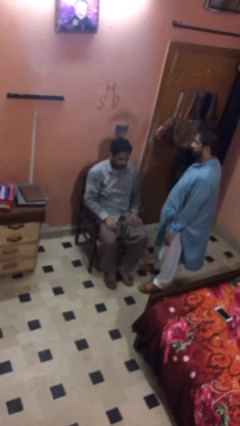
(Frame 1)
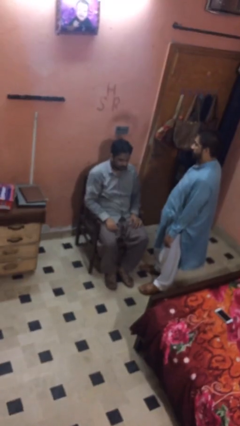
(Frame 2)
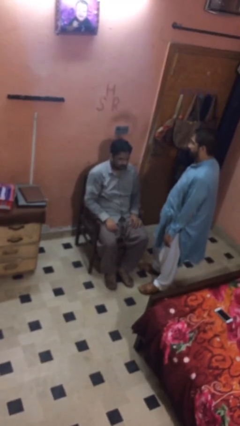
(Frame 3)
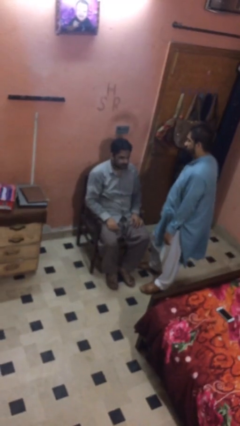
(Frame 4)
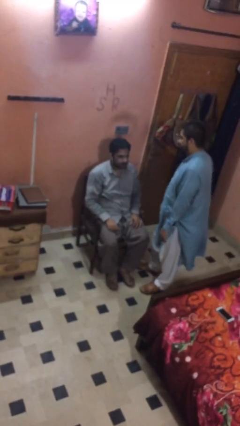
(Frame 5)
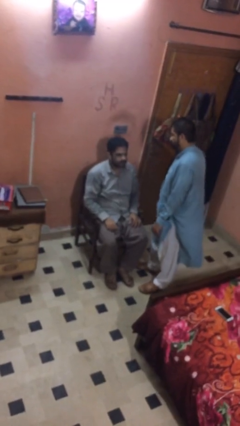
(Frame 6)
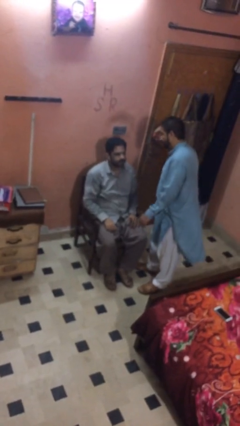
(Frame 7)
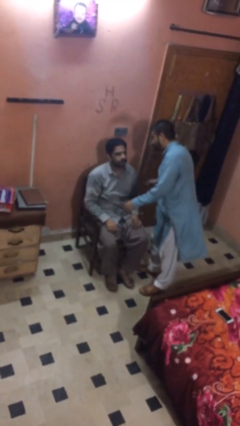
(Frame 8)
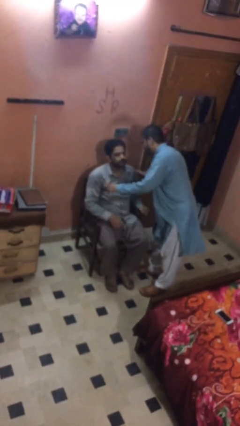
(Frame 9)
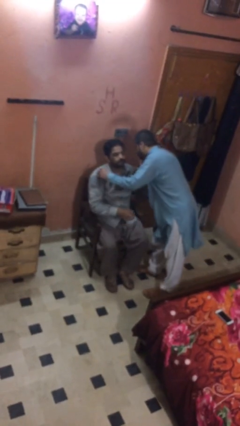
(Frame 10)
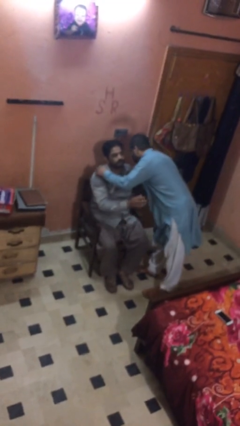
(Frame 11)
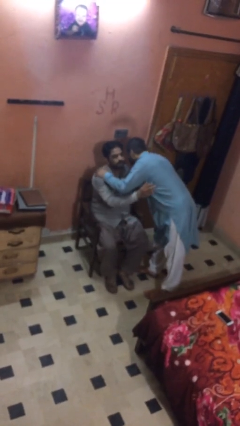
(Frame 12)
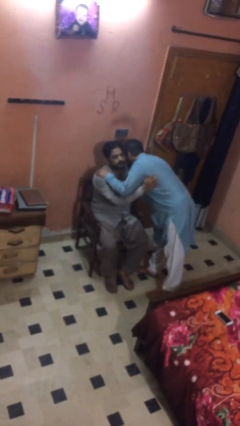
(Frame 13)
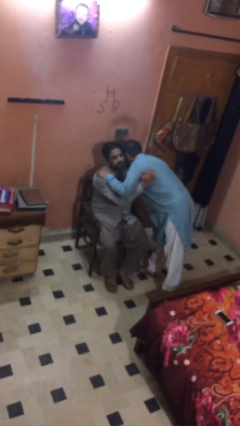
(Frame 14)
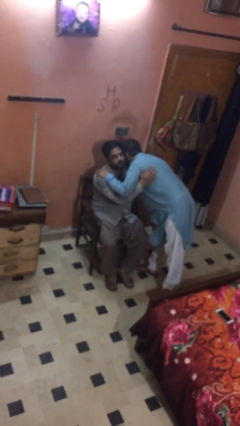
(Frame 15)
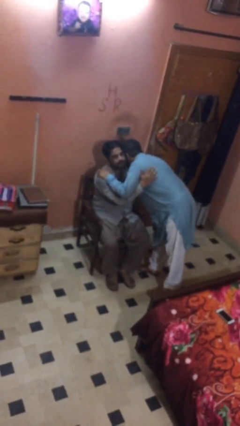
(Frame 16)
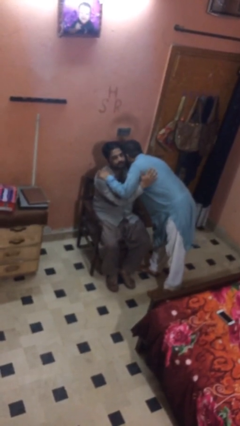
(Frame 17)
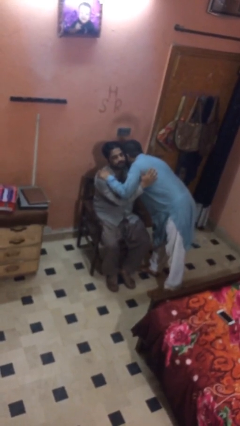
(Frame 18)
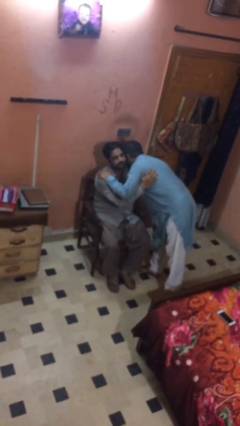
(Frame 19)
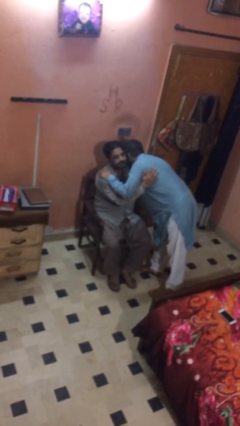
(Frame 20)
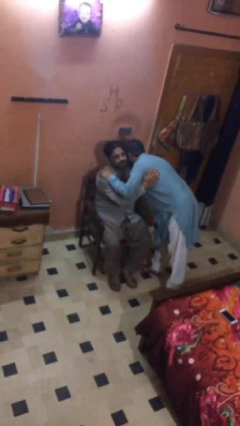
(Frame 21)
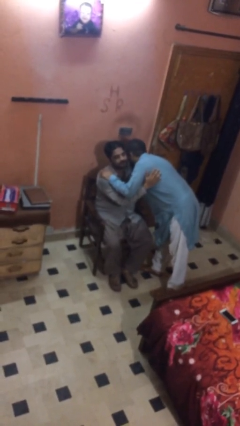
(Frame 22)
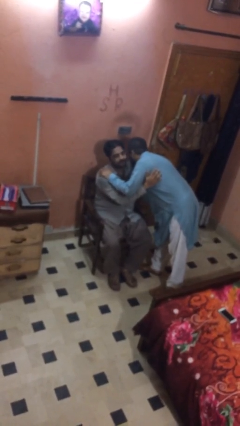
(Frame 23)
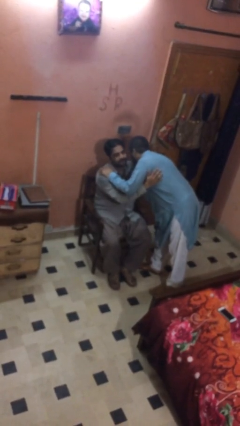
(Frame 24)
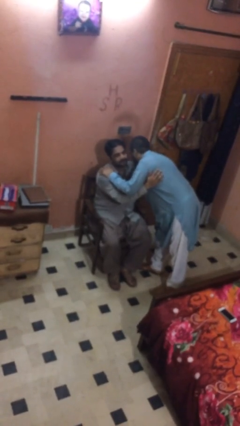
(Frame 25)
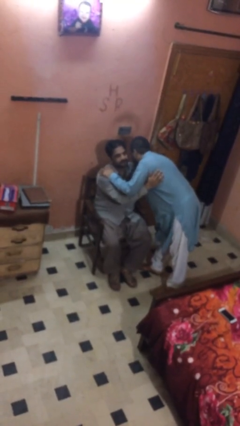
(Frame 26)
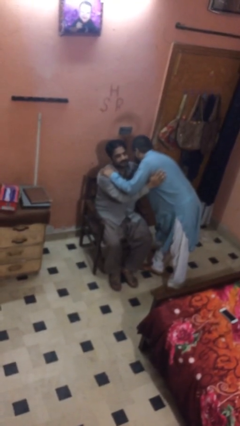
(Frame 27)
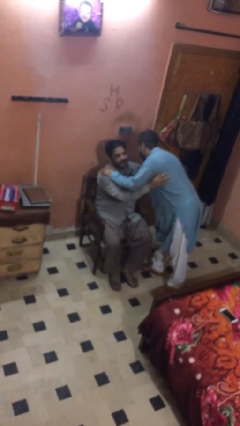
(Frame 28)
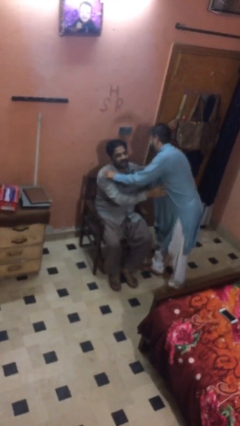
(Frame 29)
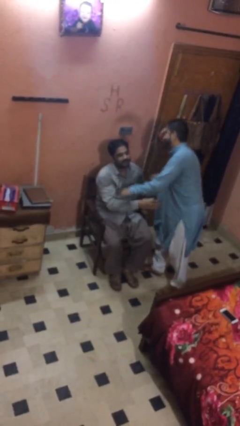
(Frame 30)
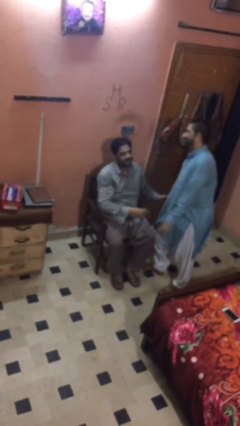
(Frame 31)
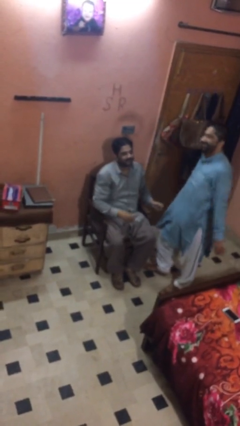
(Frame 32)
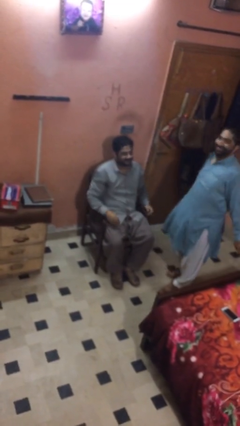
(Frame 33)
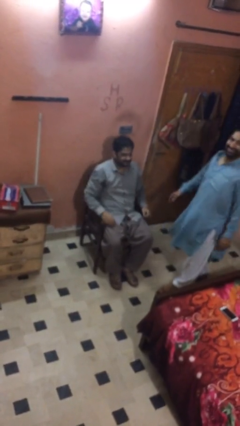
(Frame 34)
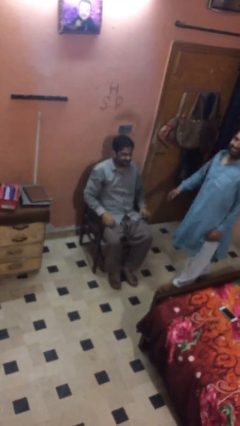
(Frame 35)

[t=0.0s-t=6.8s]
person embraces person

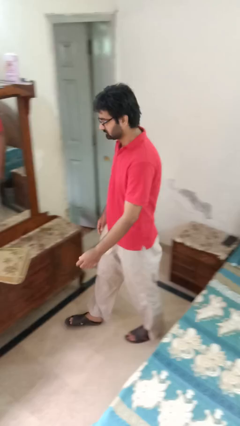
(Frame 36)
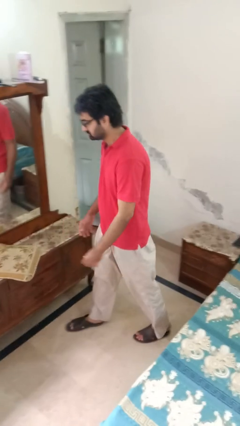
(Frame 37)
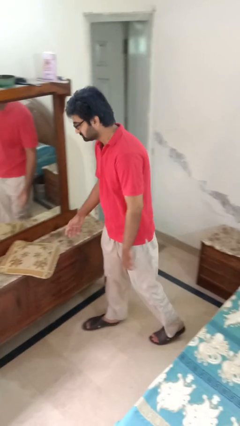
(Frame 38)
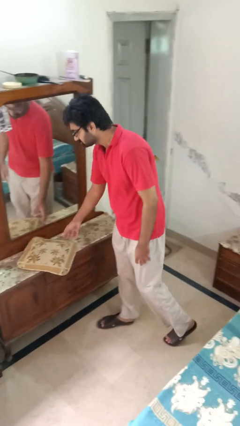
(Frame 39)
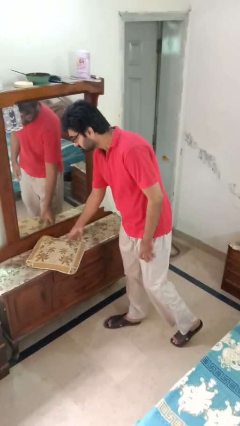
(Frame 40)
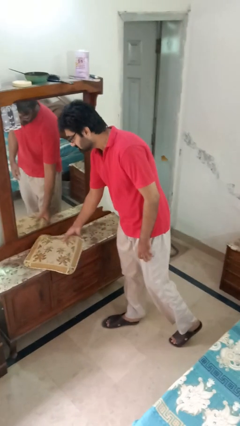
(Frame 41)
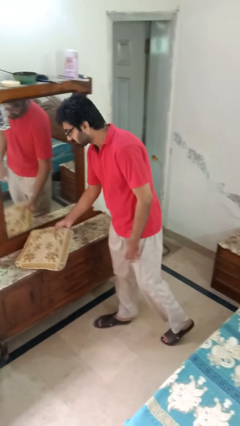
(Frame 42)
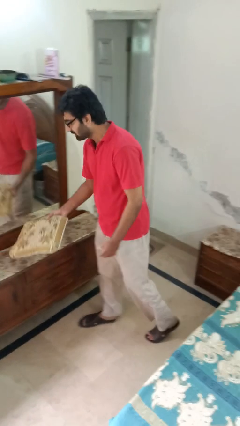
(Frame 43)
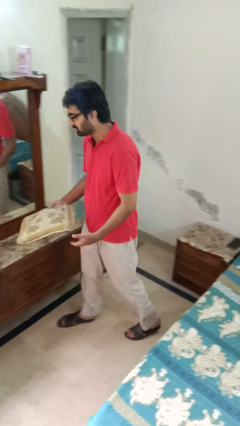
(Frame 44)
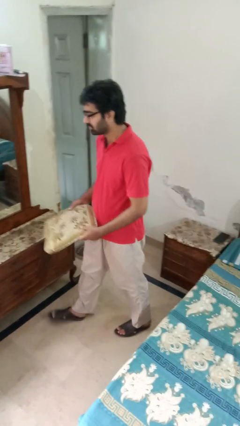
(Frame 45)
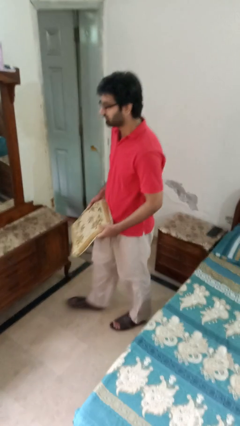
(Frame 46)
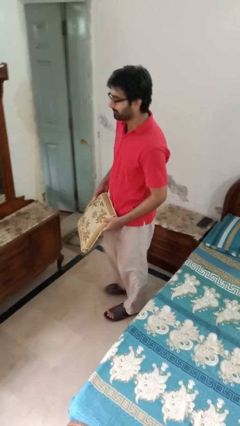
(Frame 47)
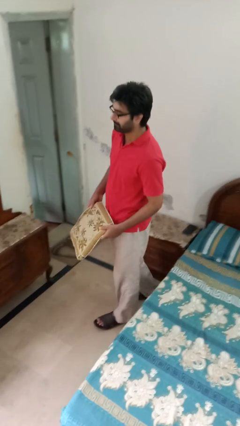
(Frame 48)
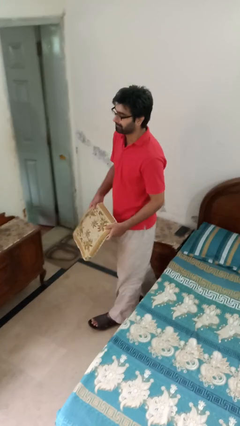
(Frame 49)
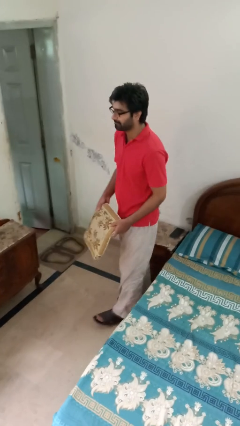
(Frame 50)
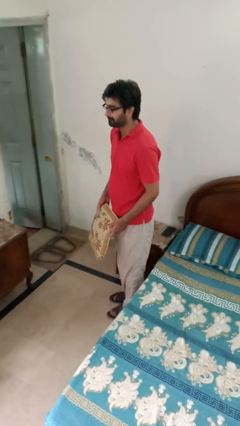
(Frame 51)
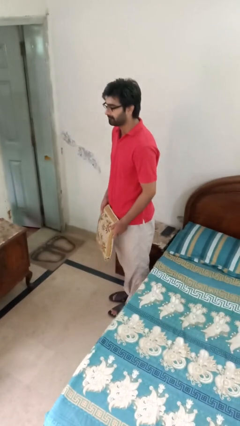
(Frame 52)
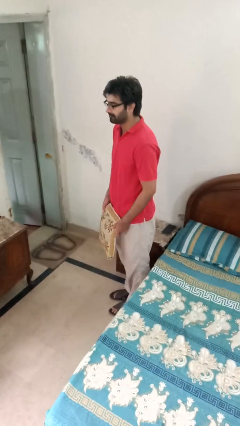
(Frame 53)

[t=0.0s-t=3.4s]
person picks up object from table

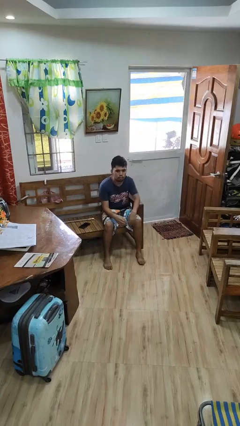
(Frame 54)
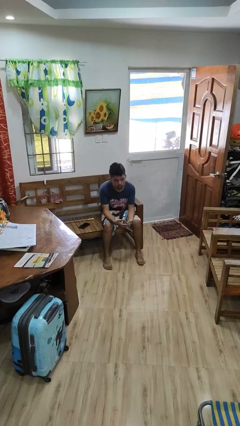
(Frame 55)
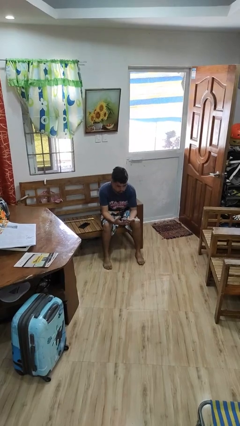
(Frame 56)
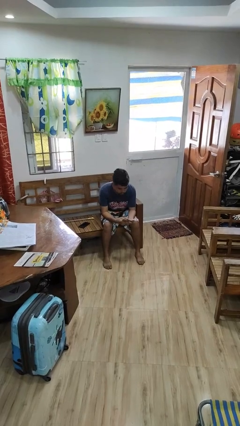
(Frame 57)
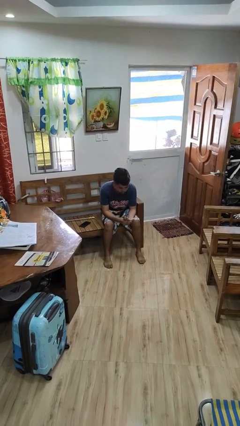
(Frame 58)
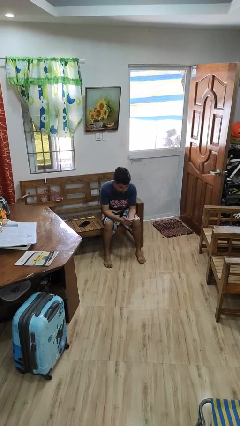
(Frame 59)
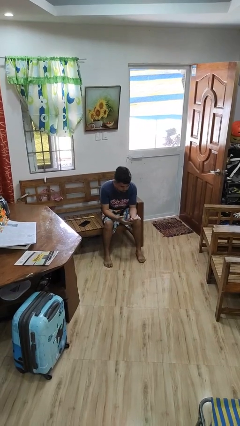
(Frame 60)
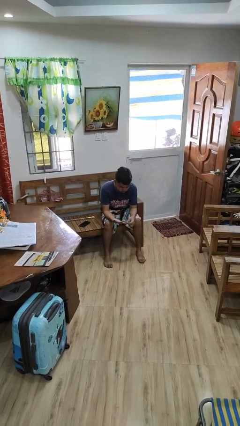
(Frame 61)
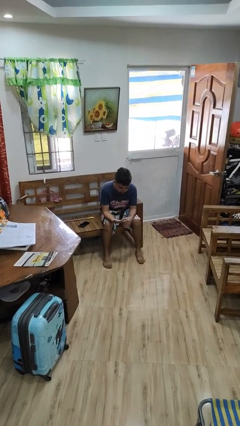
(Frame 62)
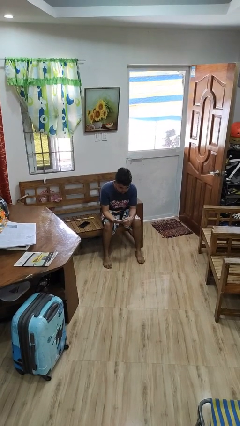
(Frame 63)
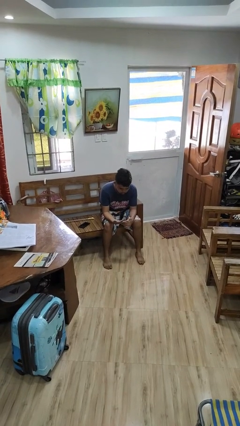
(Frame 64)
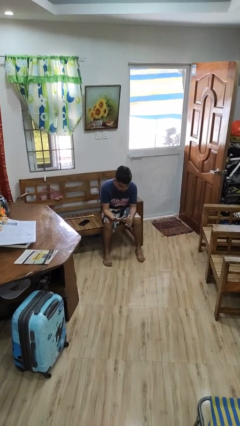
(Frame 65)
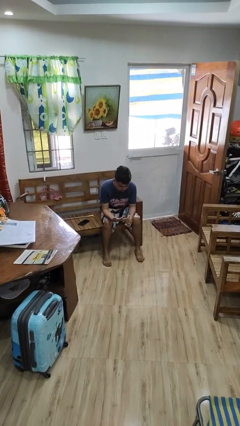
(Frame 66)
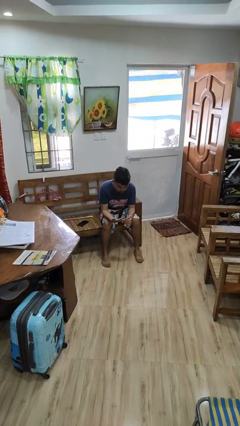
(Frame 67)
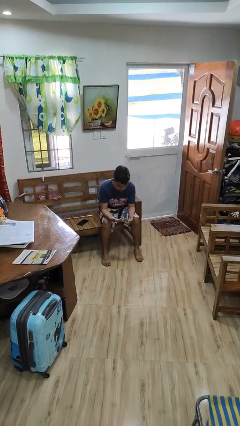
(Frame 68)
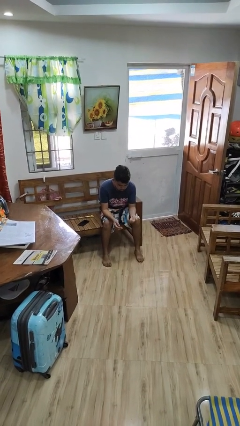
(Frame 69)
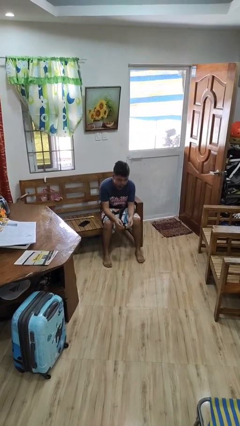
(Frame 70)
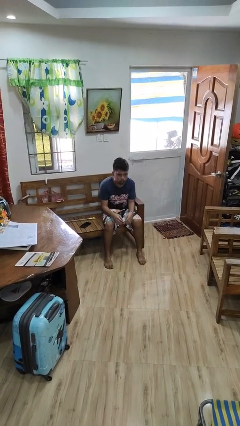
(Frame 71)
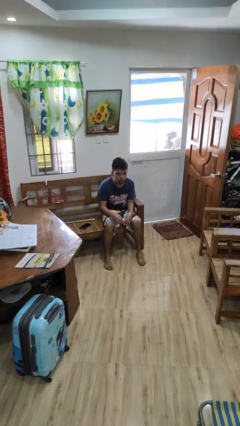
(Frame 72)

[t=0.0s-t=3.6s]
person looks at hands in lap

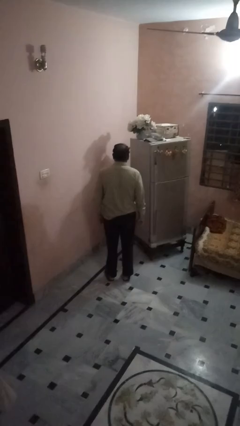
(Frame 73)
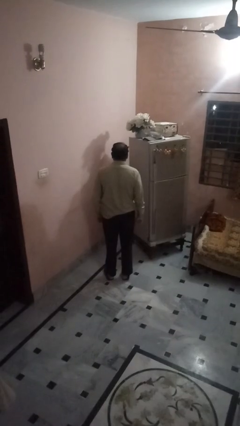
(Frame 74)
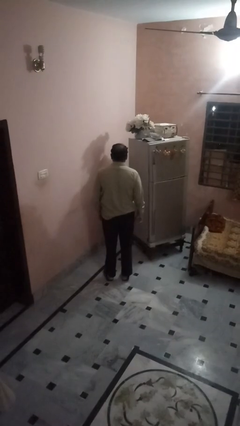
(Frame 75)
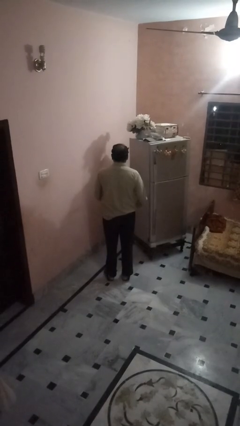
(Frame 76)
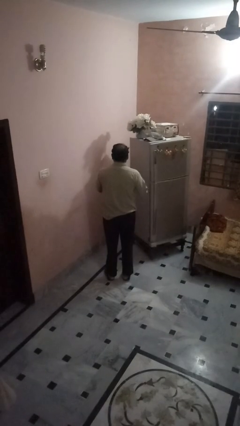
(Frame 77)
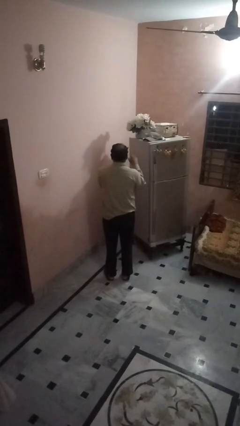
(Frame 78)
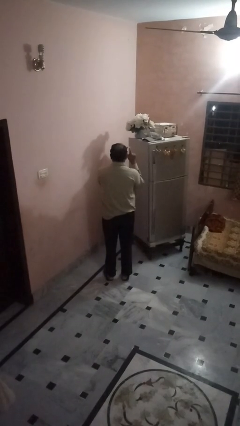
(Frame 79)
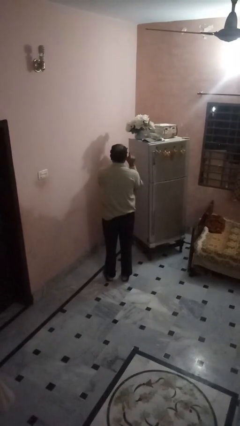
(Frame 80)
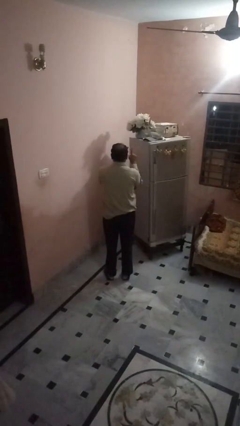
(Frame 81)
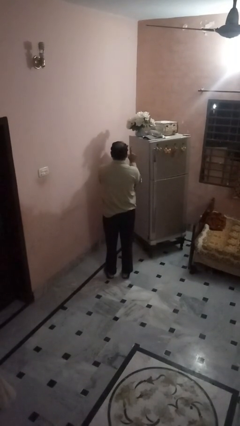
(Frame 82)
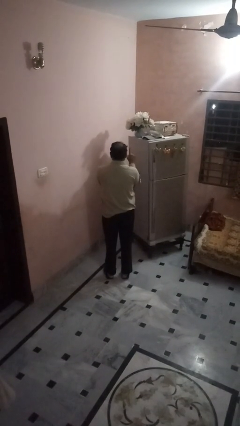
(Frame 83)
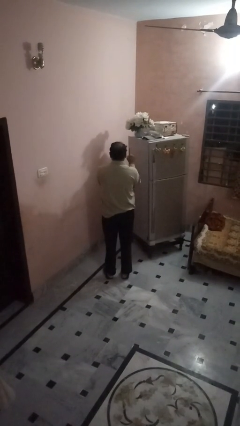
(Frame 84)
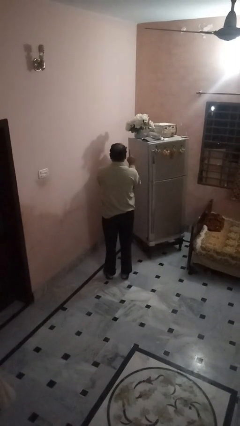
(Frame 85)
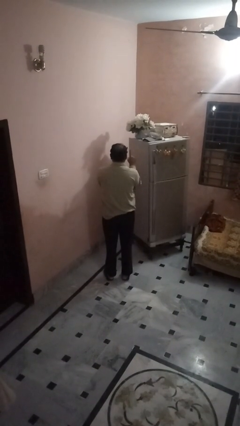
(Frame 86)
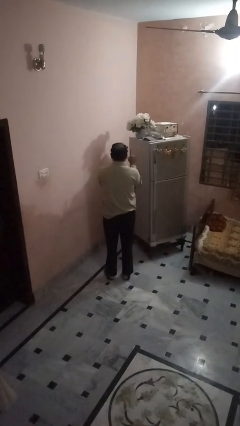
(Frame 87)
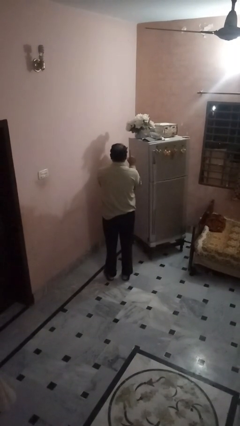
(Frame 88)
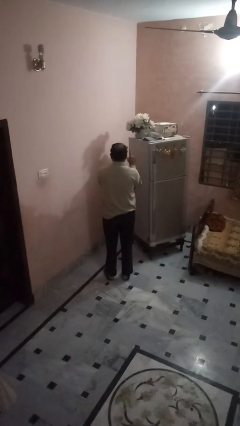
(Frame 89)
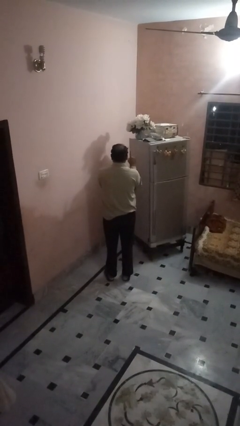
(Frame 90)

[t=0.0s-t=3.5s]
person gestures number one
